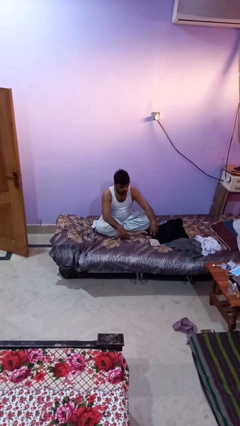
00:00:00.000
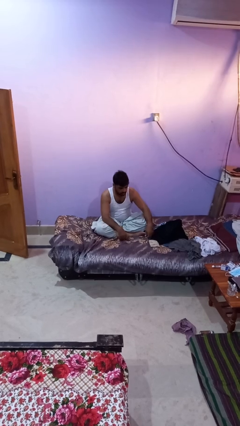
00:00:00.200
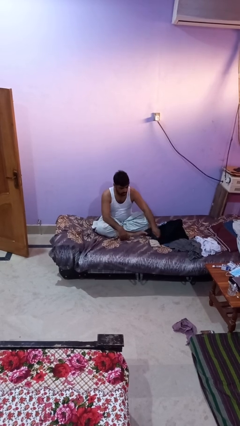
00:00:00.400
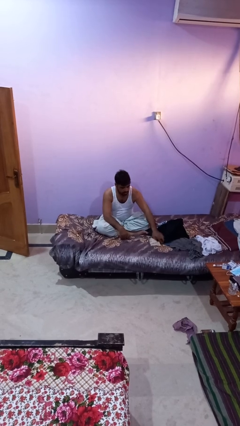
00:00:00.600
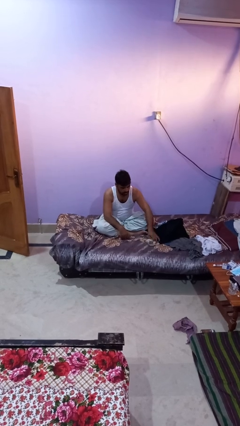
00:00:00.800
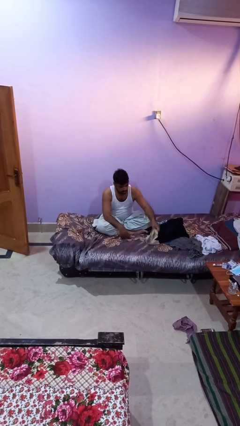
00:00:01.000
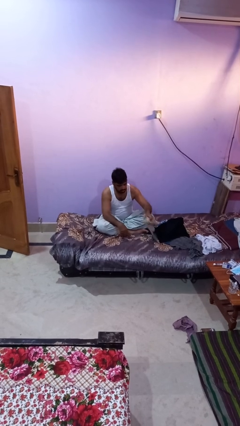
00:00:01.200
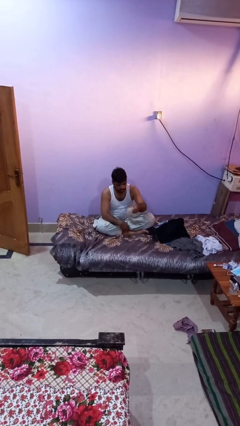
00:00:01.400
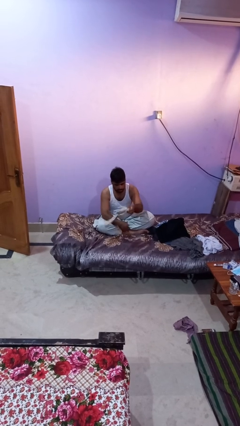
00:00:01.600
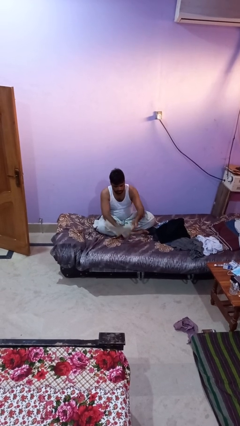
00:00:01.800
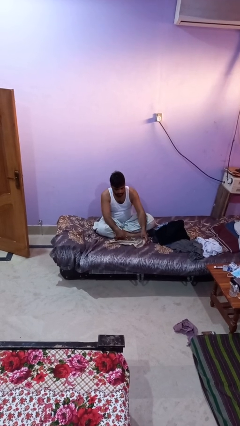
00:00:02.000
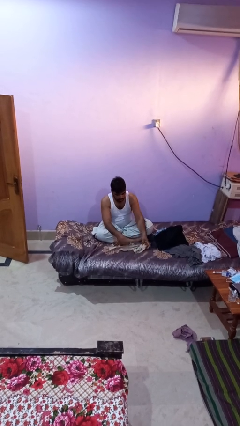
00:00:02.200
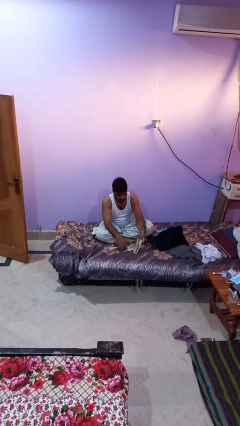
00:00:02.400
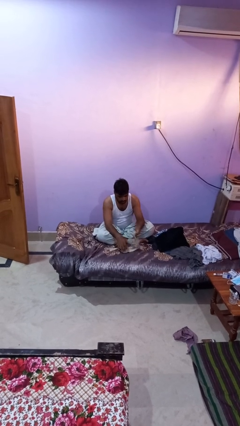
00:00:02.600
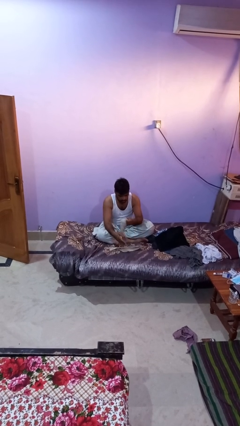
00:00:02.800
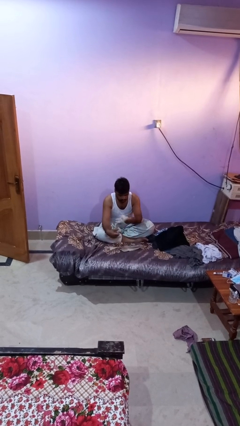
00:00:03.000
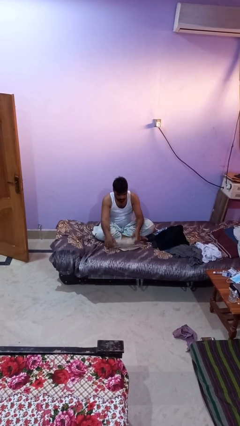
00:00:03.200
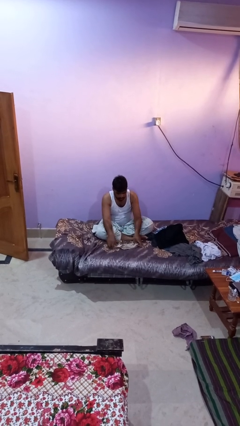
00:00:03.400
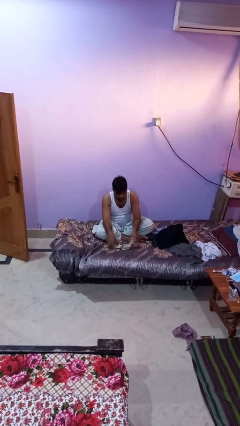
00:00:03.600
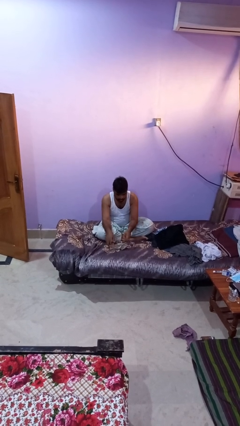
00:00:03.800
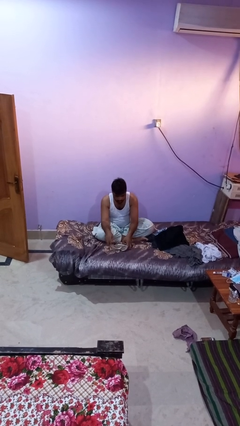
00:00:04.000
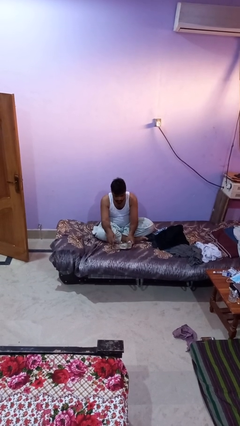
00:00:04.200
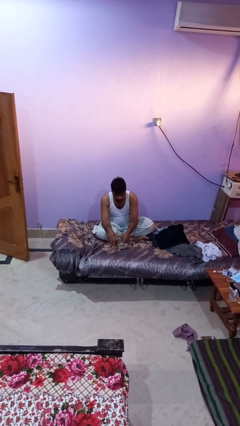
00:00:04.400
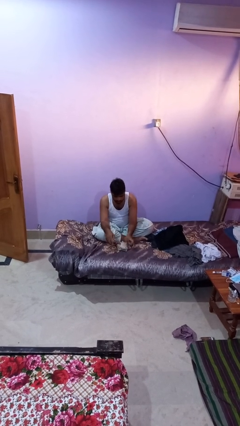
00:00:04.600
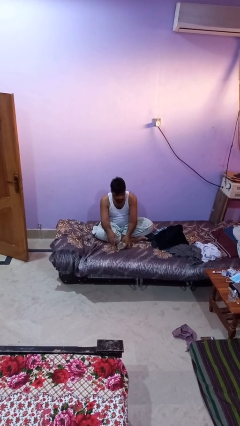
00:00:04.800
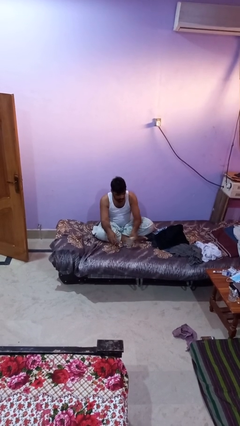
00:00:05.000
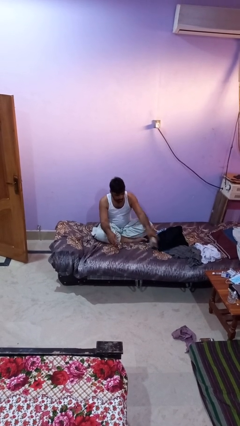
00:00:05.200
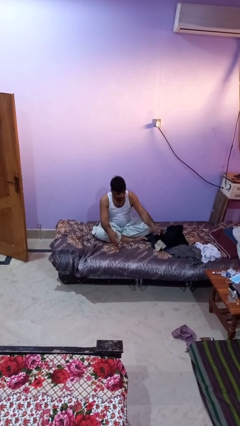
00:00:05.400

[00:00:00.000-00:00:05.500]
person folds socks

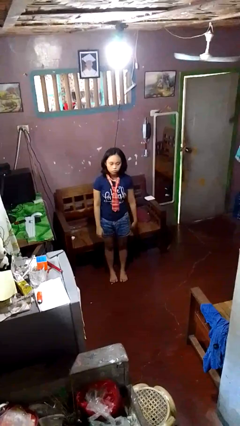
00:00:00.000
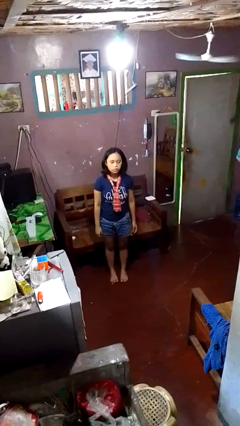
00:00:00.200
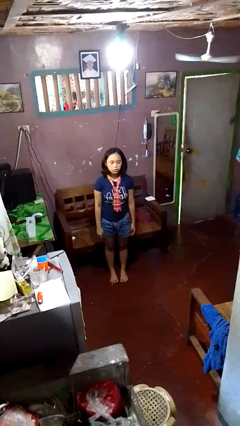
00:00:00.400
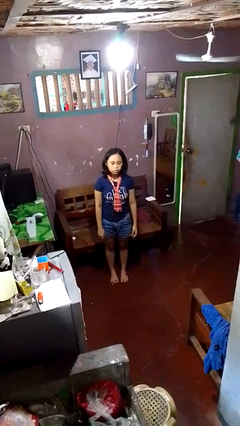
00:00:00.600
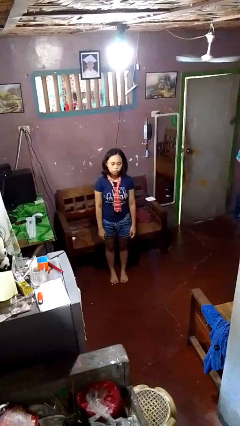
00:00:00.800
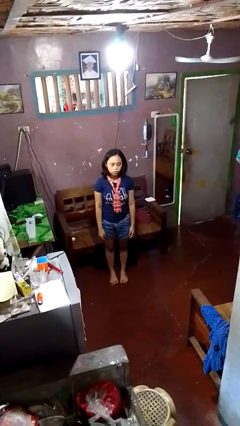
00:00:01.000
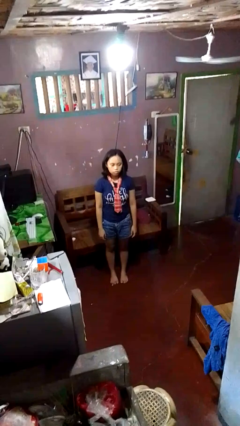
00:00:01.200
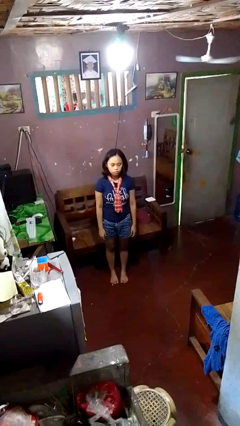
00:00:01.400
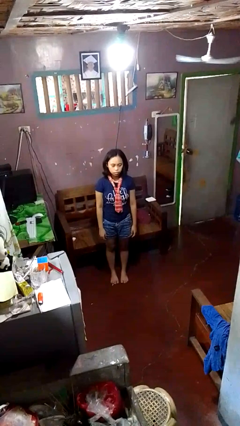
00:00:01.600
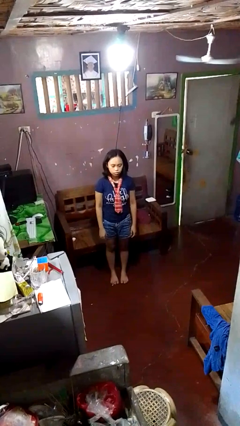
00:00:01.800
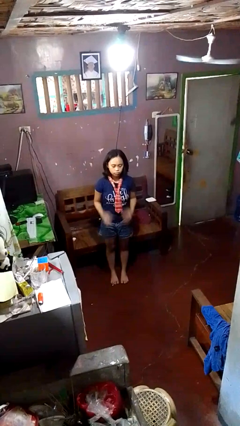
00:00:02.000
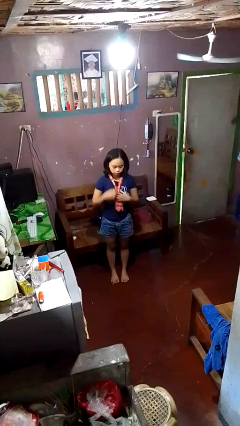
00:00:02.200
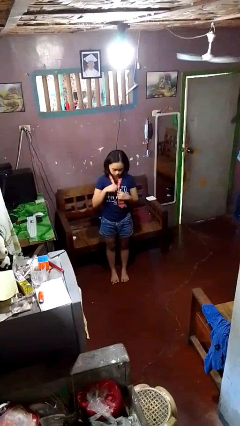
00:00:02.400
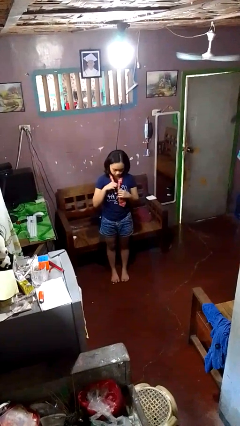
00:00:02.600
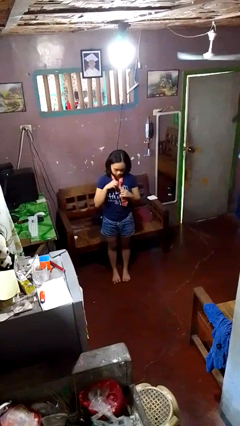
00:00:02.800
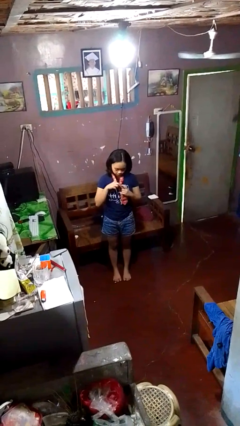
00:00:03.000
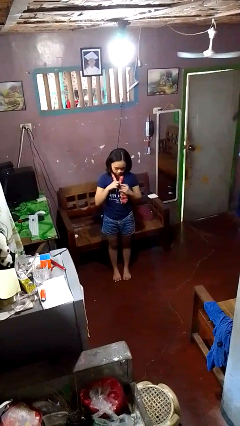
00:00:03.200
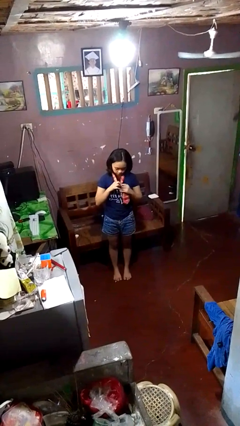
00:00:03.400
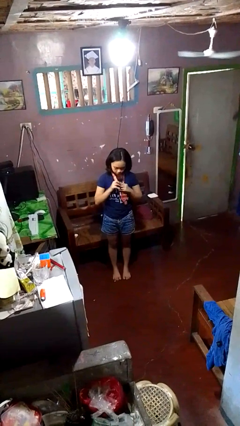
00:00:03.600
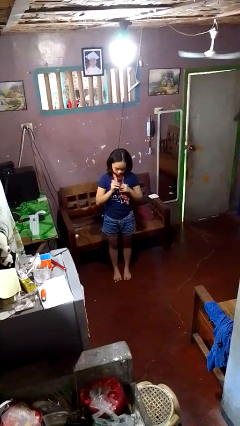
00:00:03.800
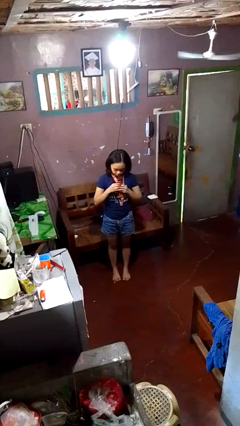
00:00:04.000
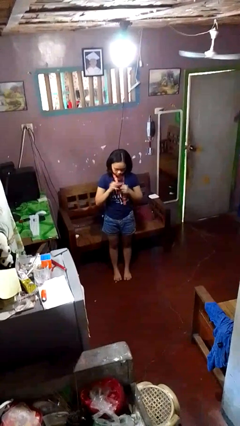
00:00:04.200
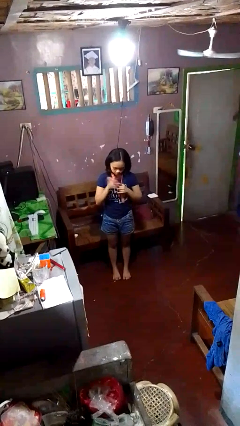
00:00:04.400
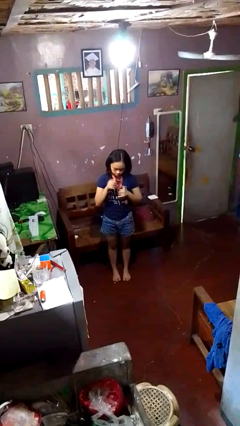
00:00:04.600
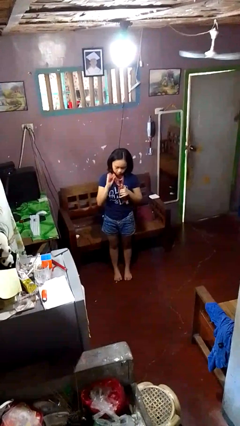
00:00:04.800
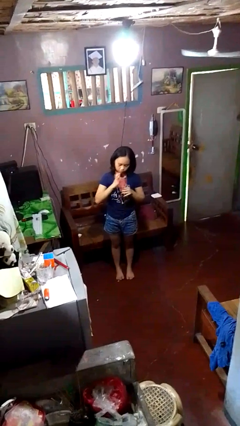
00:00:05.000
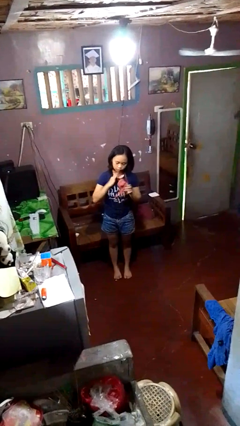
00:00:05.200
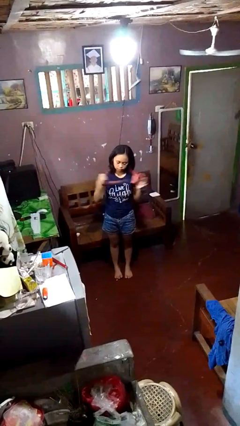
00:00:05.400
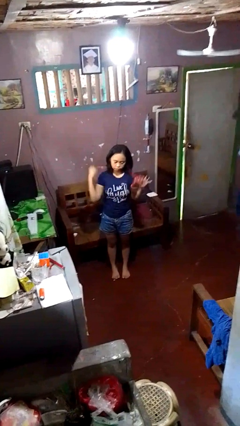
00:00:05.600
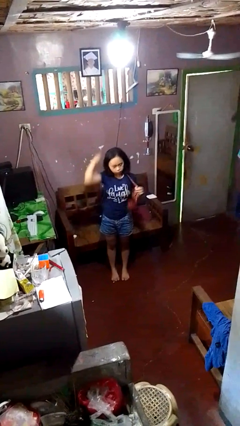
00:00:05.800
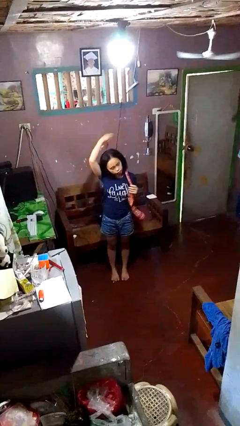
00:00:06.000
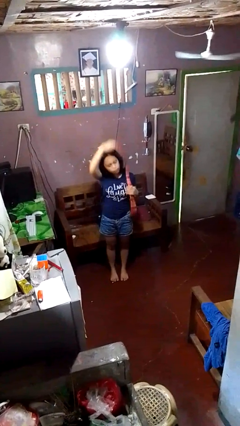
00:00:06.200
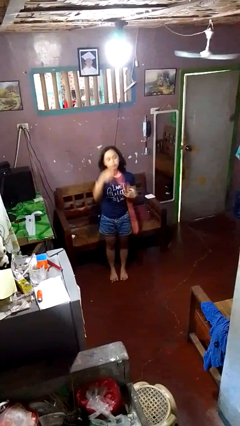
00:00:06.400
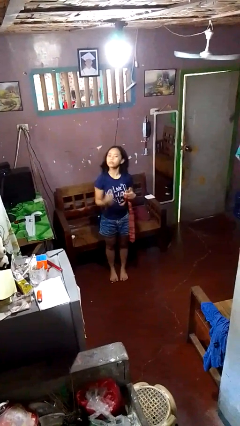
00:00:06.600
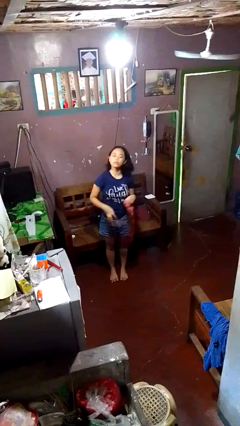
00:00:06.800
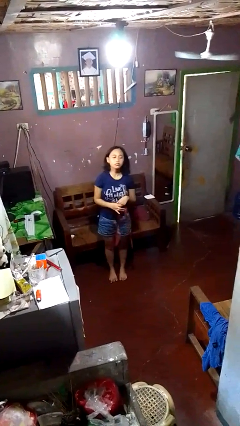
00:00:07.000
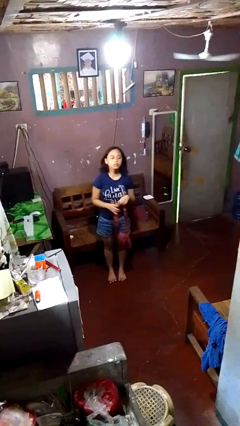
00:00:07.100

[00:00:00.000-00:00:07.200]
person takes off necktie

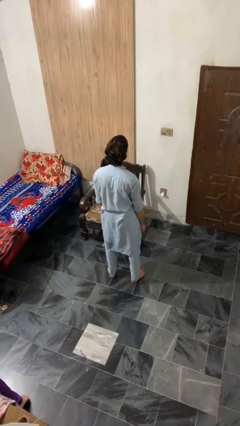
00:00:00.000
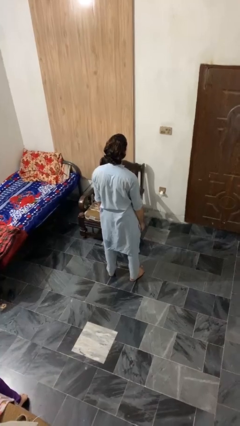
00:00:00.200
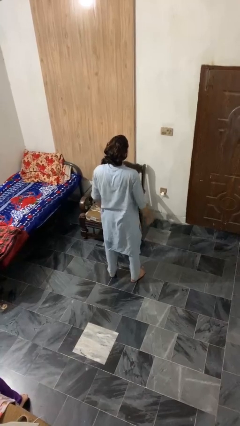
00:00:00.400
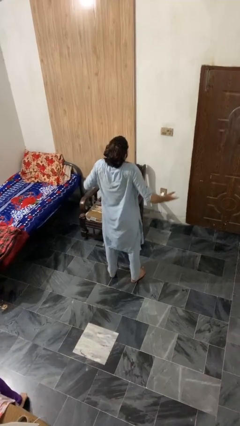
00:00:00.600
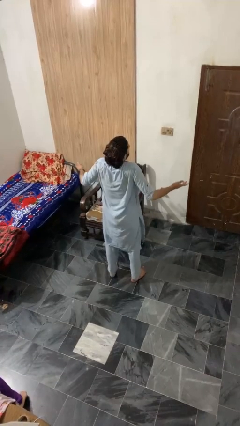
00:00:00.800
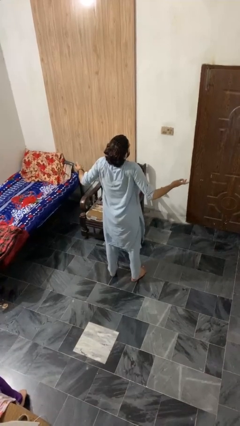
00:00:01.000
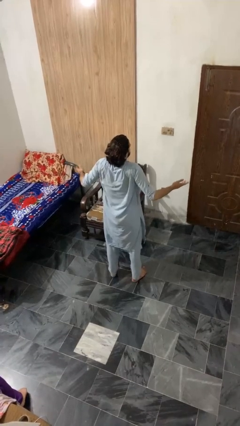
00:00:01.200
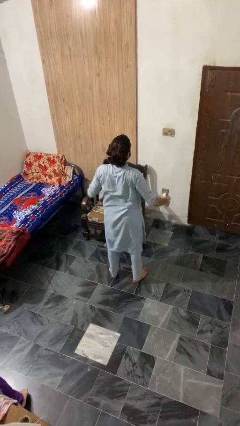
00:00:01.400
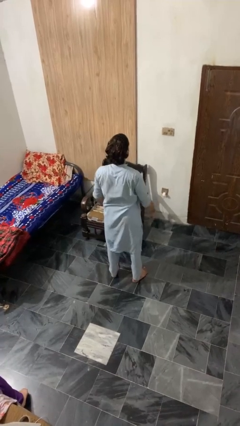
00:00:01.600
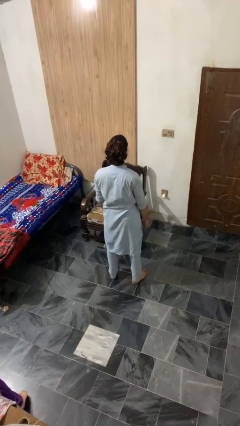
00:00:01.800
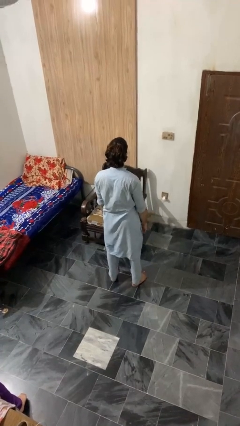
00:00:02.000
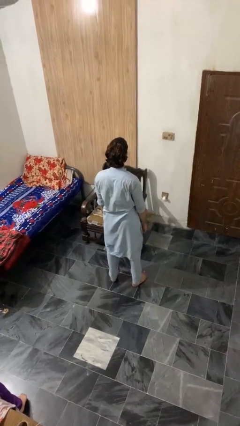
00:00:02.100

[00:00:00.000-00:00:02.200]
person shrugs

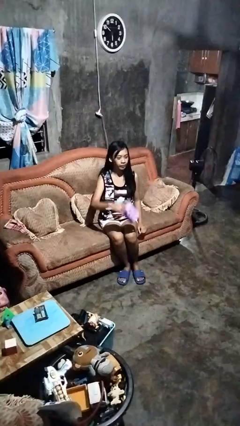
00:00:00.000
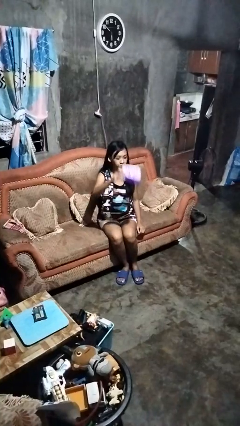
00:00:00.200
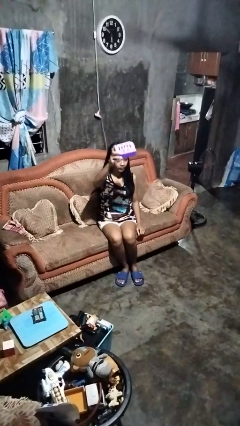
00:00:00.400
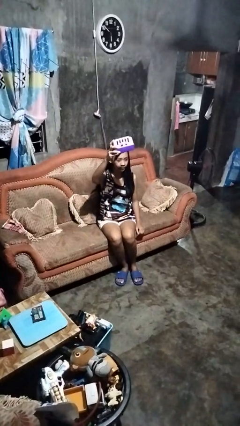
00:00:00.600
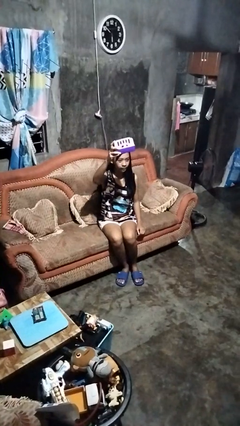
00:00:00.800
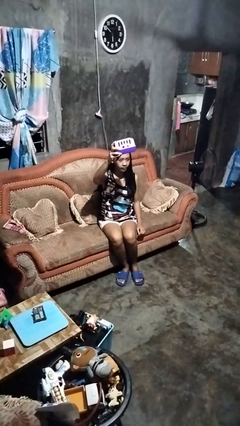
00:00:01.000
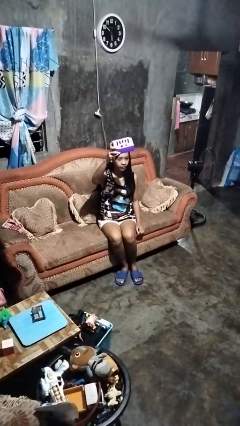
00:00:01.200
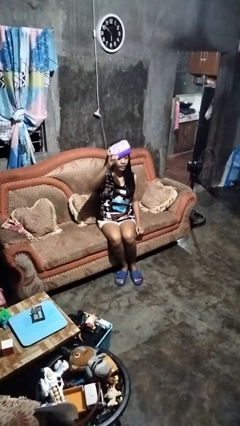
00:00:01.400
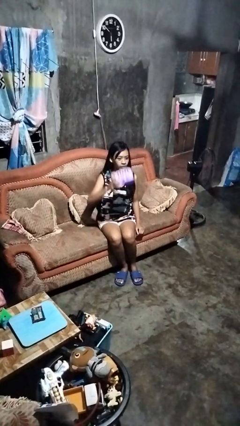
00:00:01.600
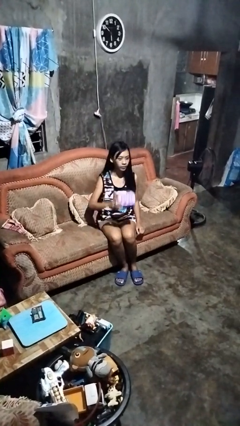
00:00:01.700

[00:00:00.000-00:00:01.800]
person holds object above head

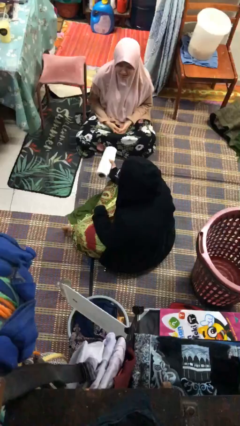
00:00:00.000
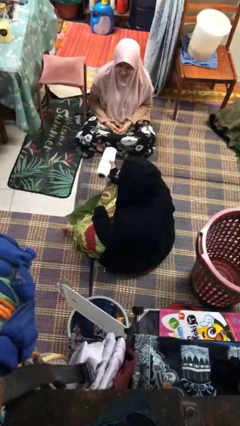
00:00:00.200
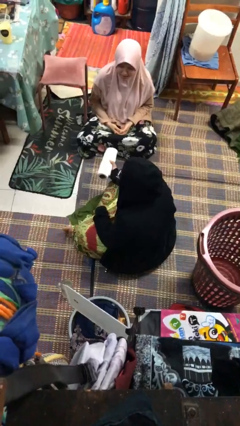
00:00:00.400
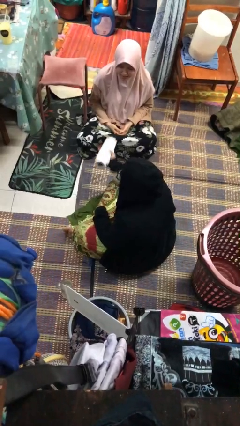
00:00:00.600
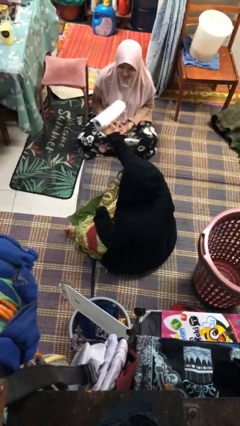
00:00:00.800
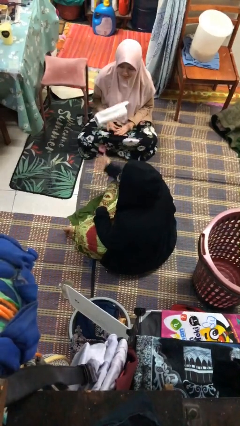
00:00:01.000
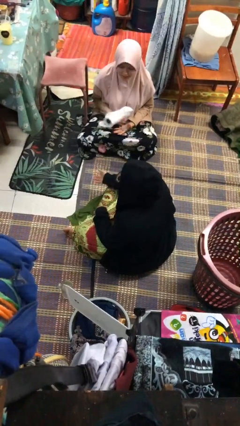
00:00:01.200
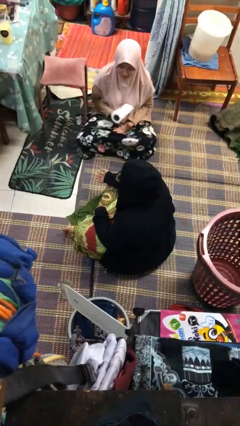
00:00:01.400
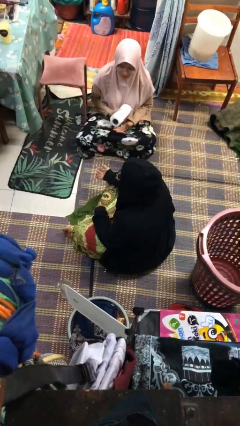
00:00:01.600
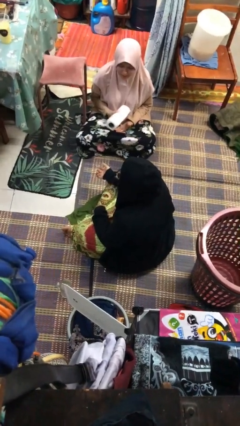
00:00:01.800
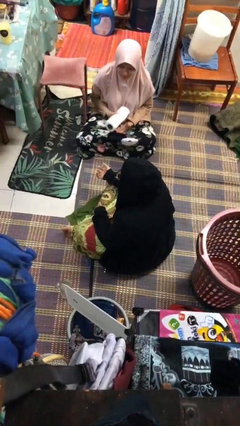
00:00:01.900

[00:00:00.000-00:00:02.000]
person throws object to person
